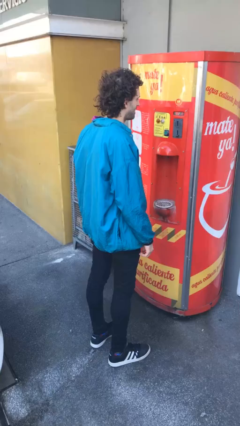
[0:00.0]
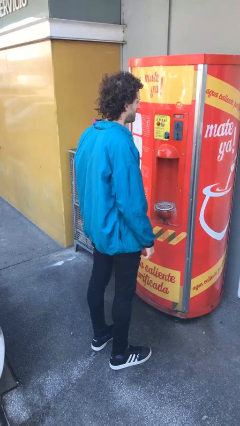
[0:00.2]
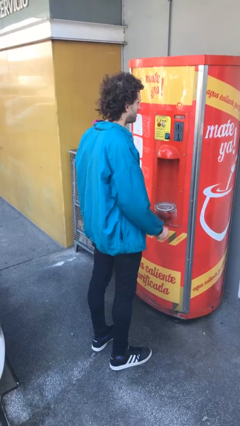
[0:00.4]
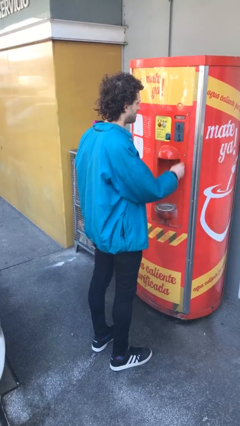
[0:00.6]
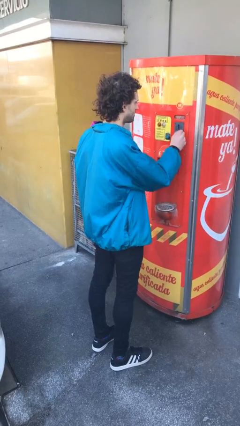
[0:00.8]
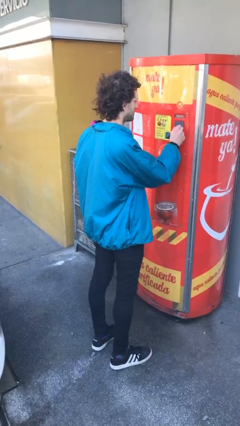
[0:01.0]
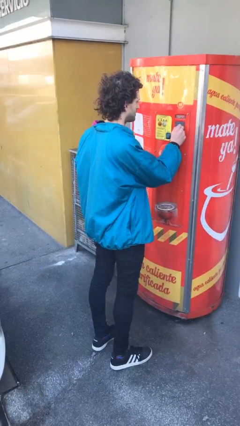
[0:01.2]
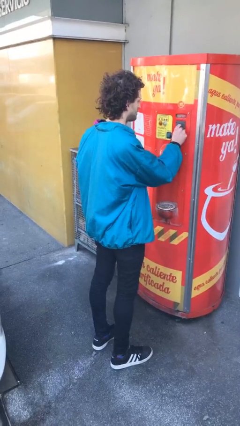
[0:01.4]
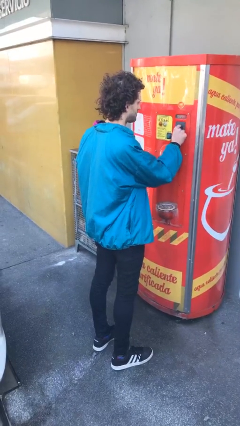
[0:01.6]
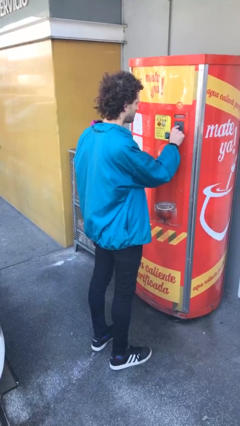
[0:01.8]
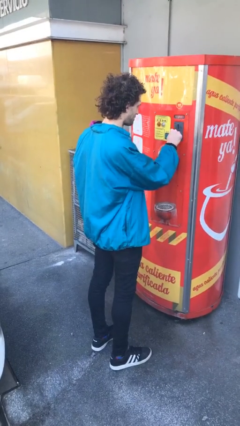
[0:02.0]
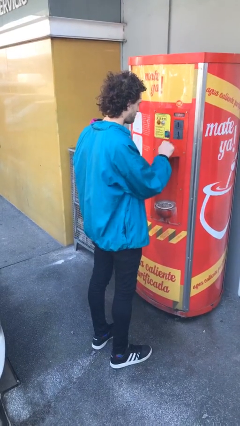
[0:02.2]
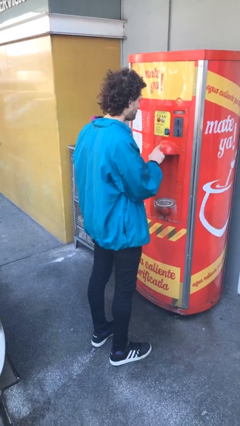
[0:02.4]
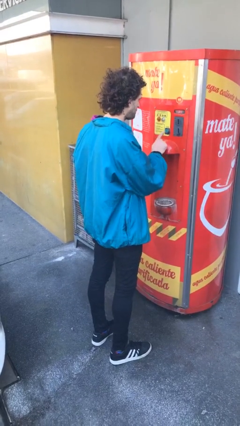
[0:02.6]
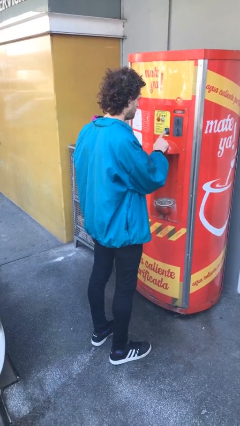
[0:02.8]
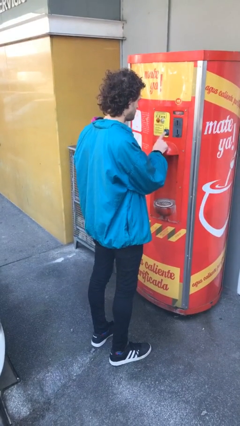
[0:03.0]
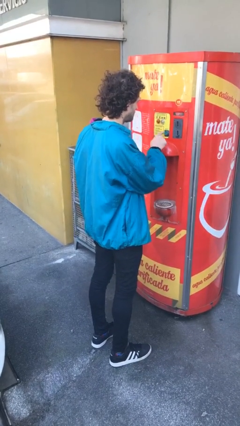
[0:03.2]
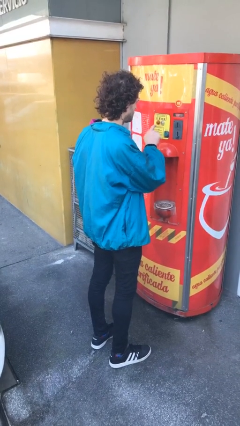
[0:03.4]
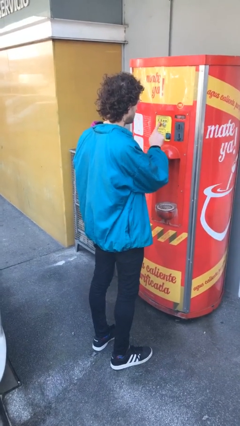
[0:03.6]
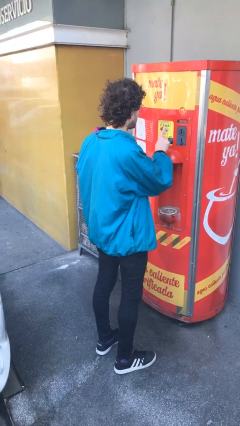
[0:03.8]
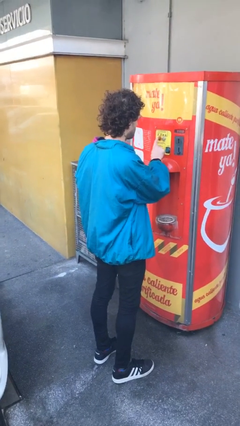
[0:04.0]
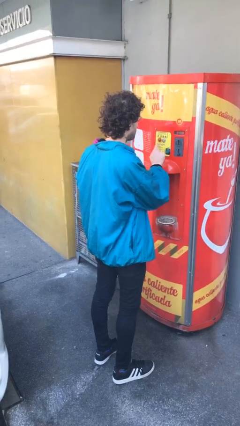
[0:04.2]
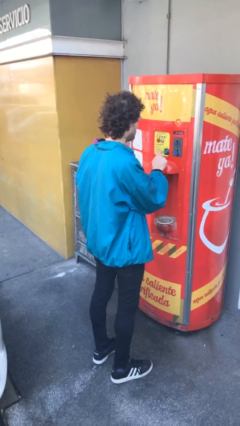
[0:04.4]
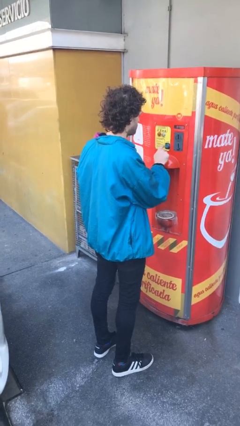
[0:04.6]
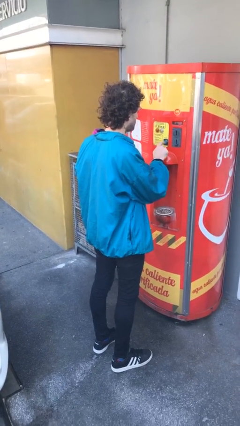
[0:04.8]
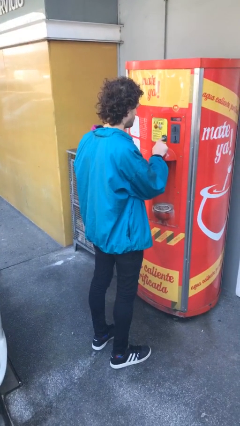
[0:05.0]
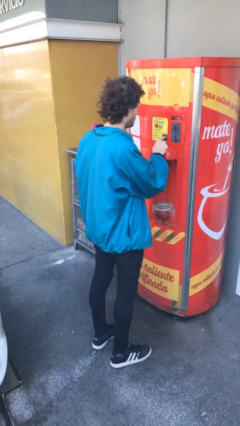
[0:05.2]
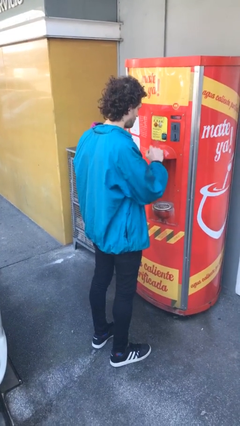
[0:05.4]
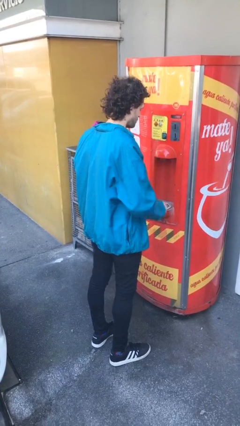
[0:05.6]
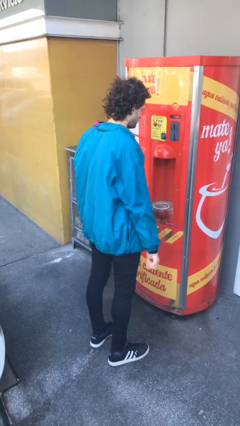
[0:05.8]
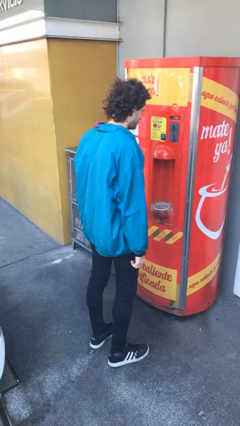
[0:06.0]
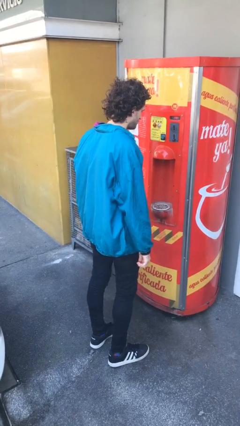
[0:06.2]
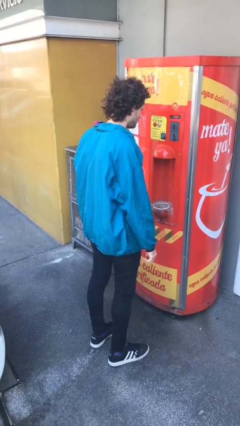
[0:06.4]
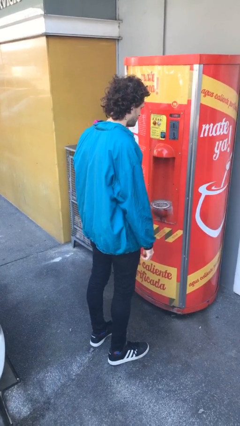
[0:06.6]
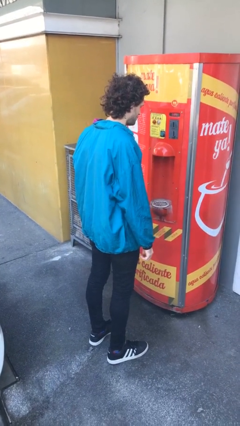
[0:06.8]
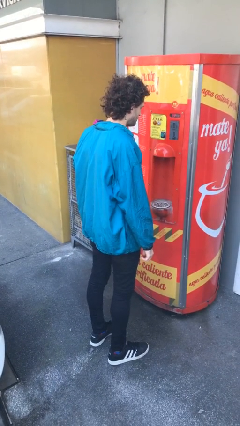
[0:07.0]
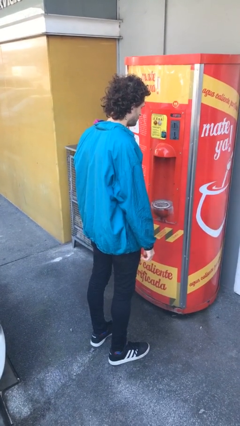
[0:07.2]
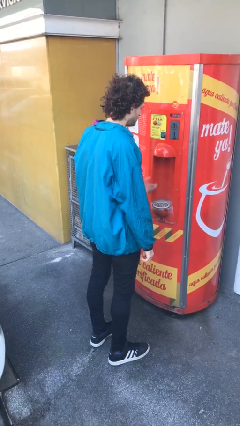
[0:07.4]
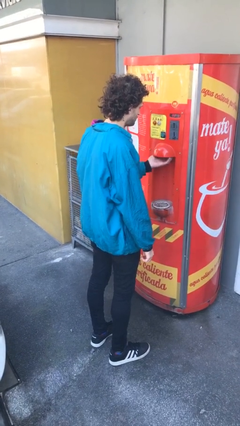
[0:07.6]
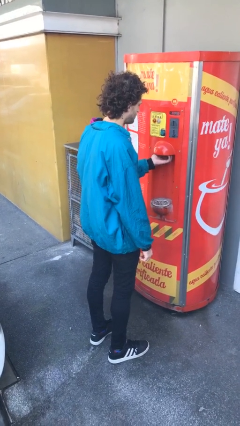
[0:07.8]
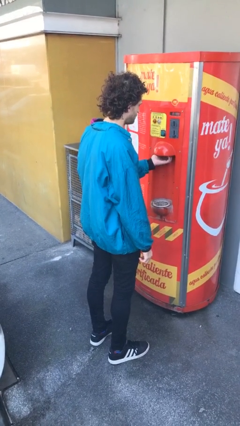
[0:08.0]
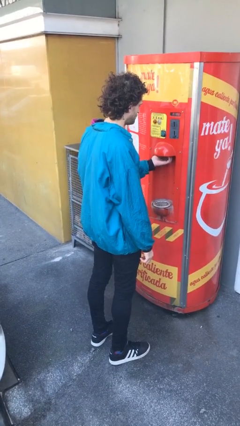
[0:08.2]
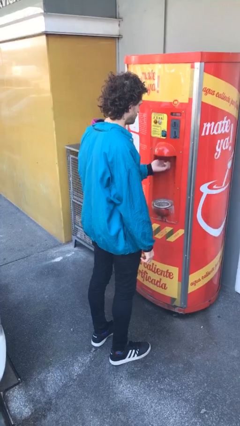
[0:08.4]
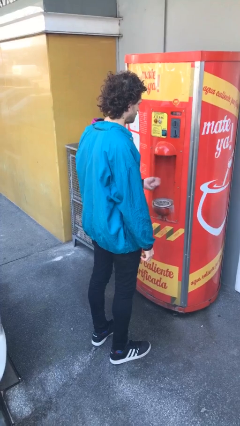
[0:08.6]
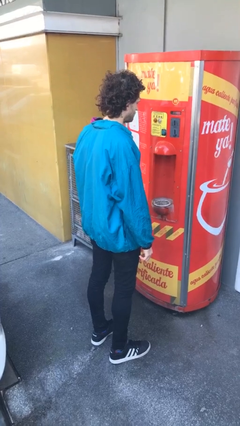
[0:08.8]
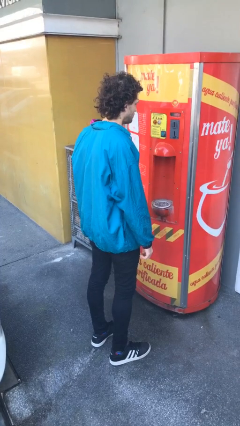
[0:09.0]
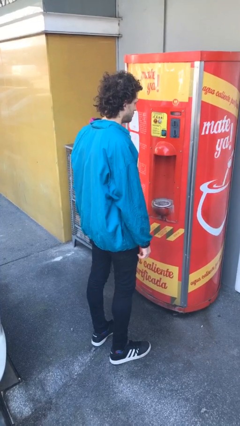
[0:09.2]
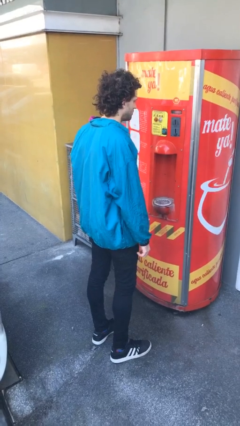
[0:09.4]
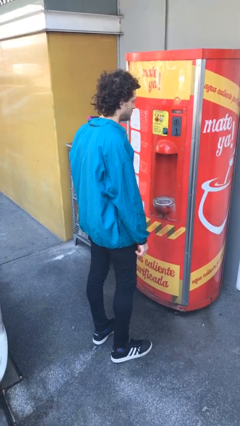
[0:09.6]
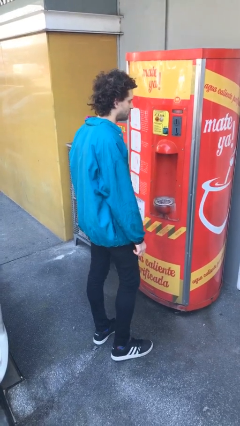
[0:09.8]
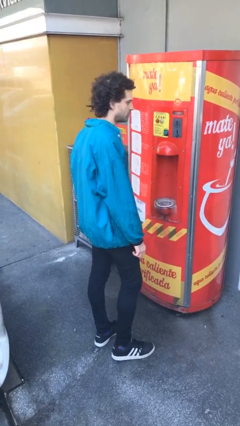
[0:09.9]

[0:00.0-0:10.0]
person purchases from machine

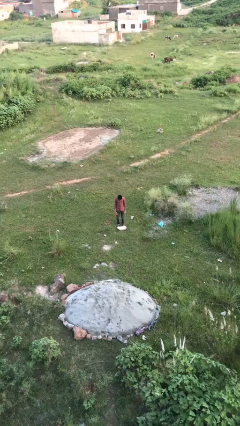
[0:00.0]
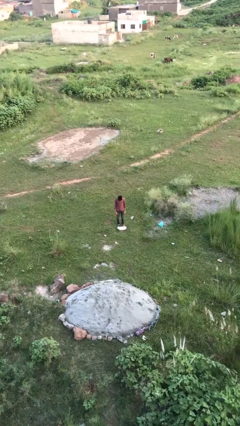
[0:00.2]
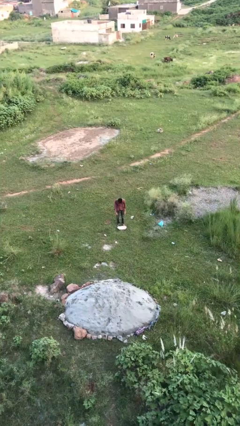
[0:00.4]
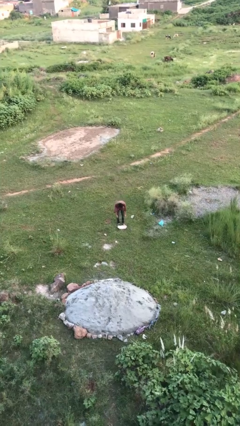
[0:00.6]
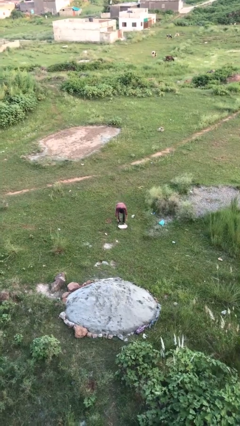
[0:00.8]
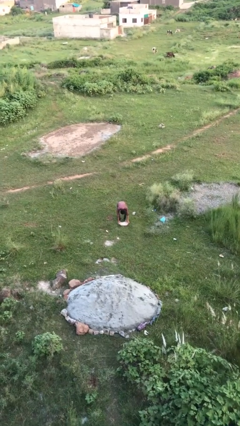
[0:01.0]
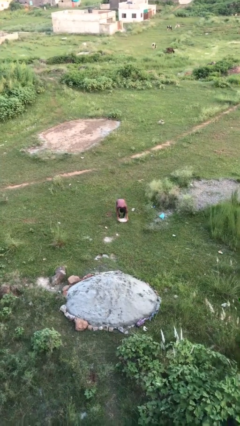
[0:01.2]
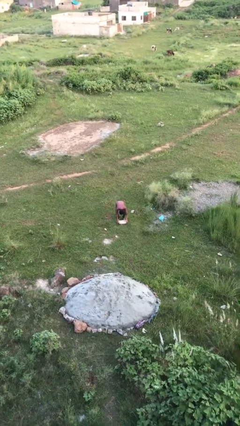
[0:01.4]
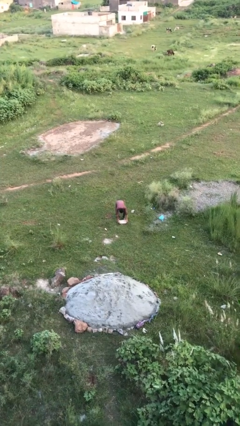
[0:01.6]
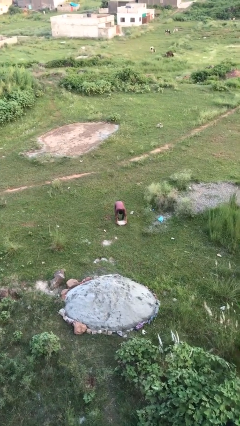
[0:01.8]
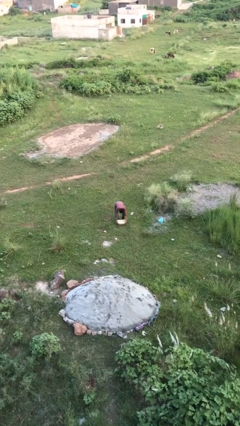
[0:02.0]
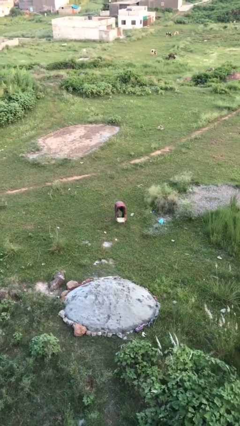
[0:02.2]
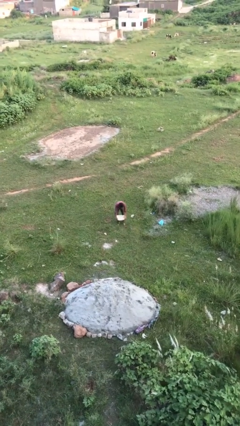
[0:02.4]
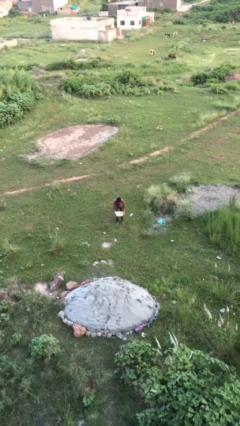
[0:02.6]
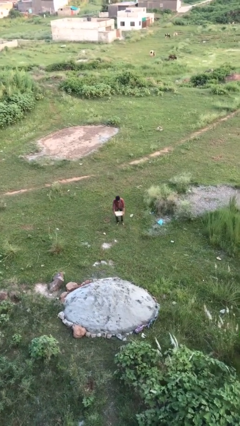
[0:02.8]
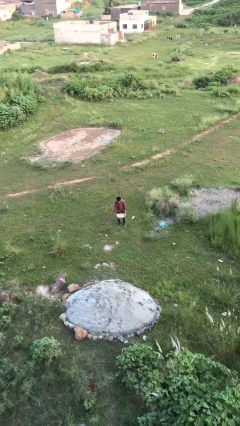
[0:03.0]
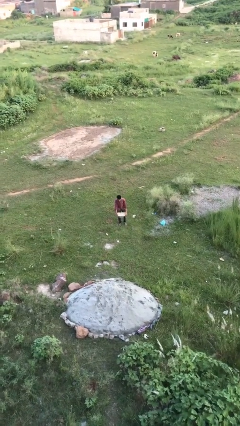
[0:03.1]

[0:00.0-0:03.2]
person picks up object from floor

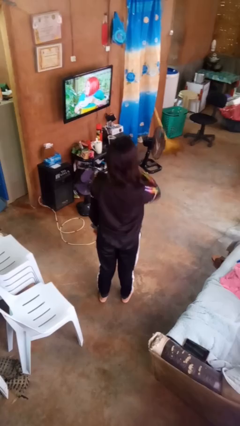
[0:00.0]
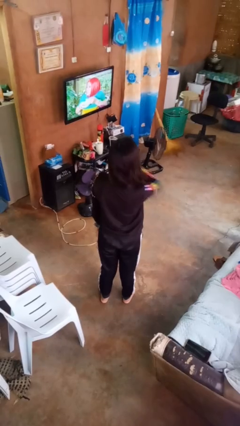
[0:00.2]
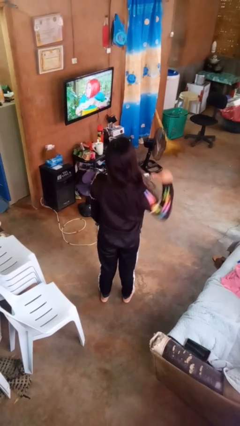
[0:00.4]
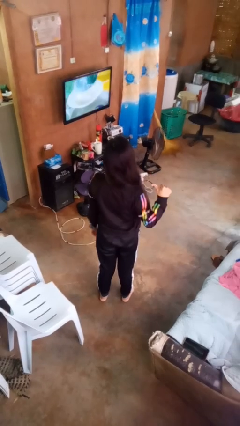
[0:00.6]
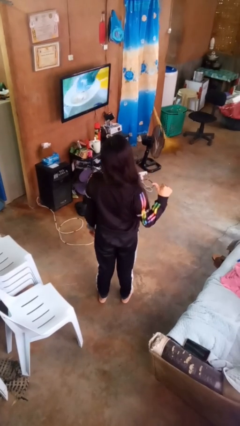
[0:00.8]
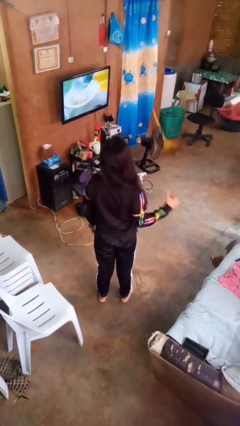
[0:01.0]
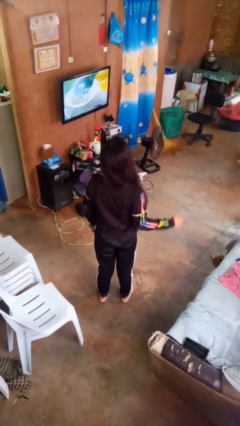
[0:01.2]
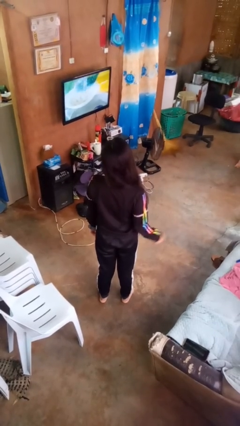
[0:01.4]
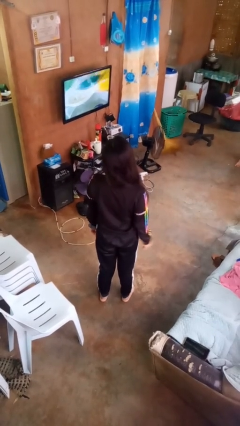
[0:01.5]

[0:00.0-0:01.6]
person gestures cut

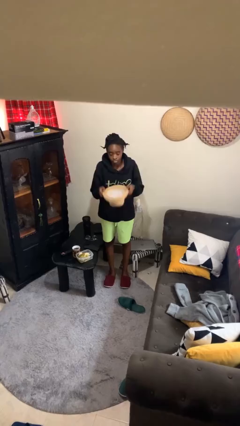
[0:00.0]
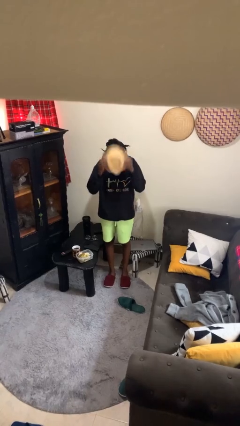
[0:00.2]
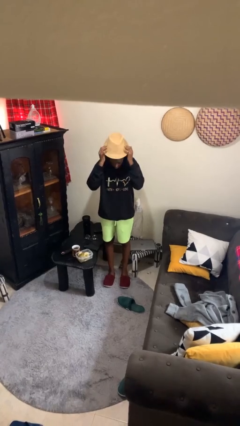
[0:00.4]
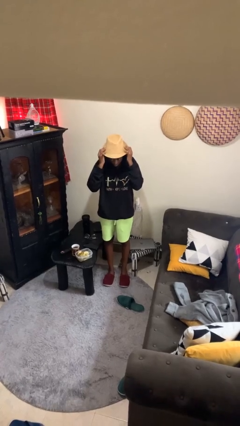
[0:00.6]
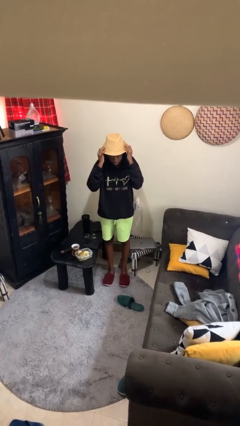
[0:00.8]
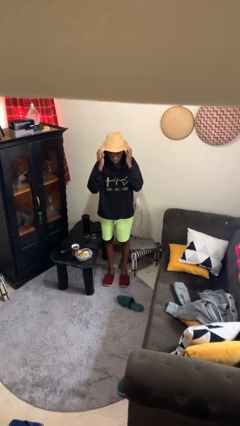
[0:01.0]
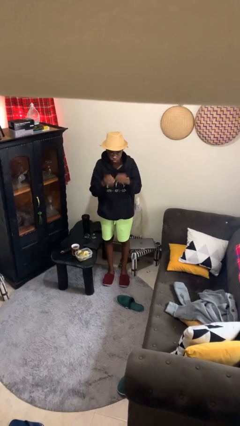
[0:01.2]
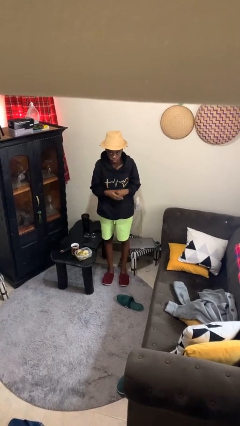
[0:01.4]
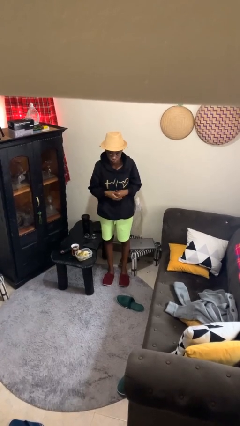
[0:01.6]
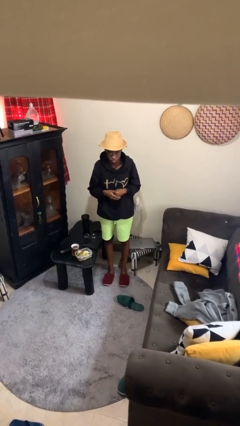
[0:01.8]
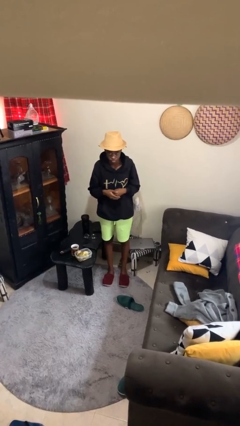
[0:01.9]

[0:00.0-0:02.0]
person puts on hat

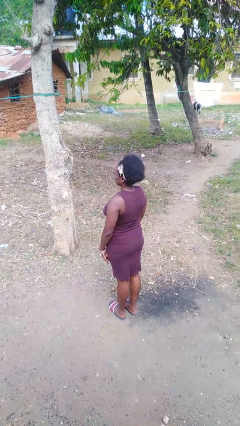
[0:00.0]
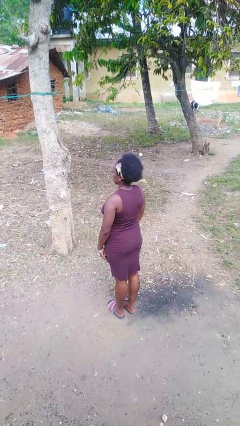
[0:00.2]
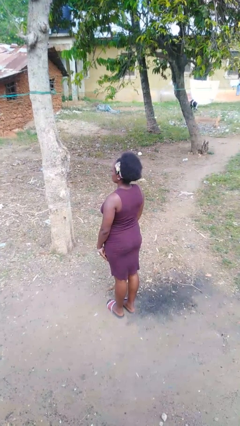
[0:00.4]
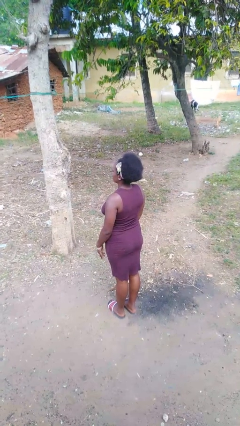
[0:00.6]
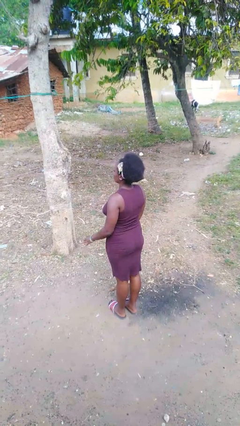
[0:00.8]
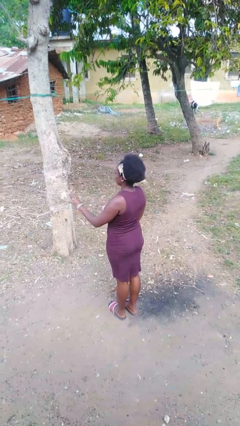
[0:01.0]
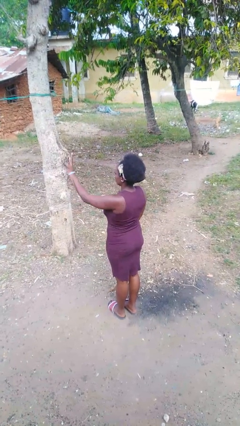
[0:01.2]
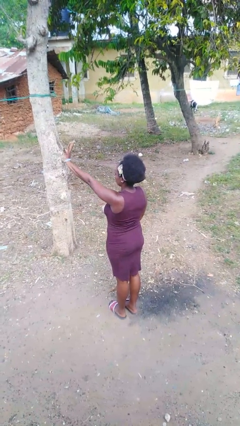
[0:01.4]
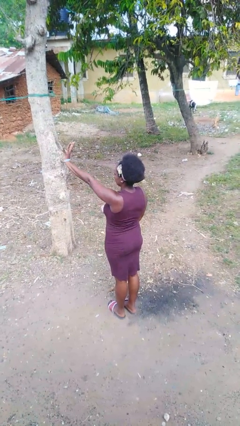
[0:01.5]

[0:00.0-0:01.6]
person gestures number four
